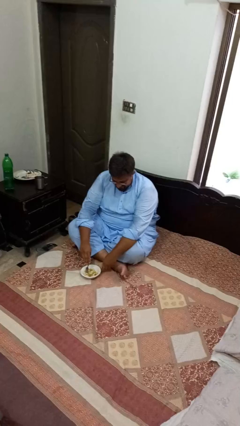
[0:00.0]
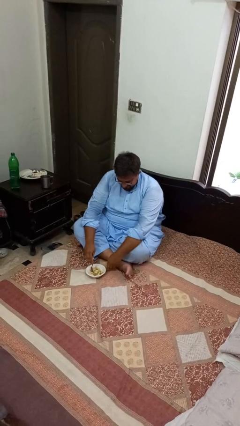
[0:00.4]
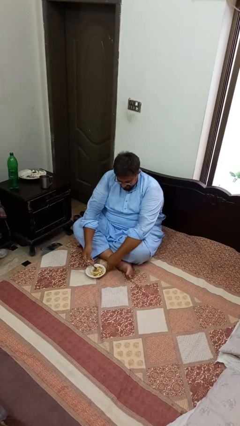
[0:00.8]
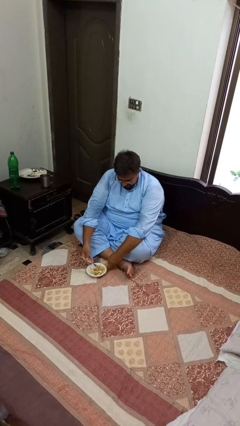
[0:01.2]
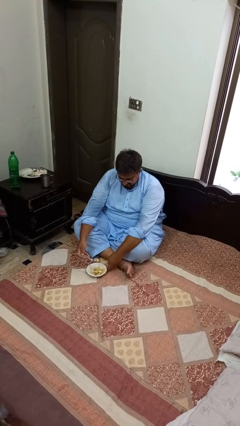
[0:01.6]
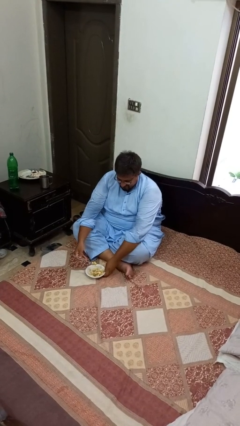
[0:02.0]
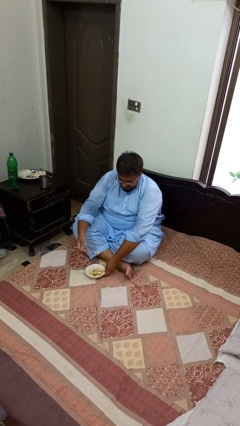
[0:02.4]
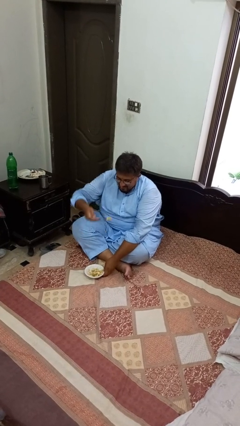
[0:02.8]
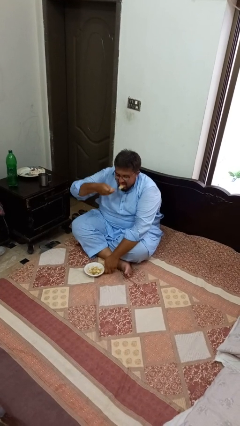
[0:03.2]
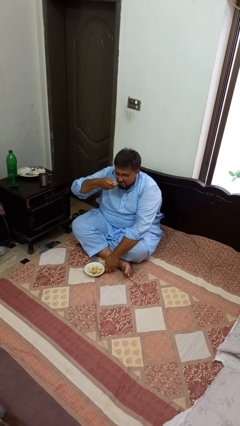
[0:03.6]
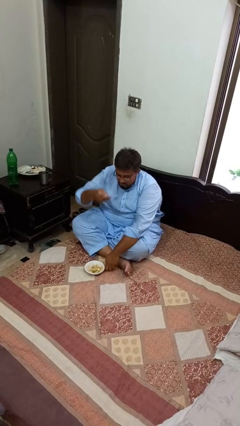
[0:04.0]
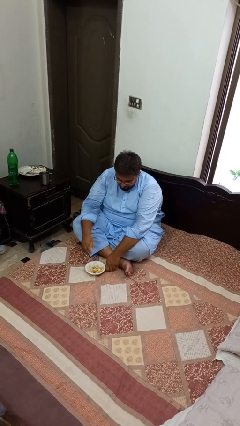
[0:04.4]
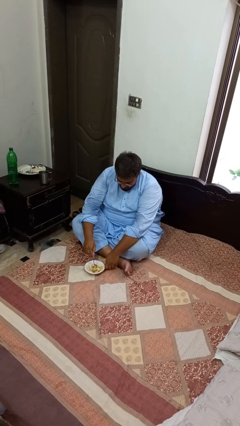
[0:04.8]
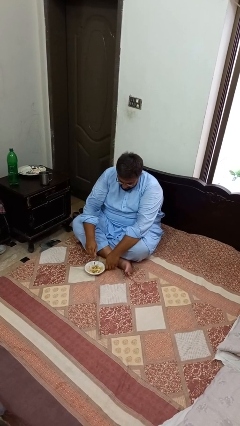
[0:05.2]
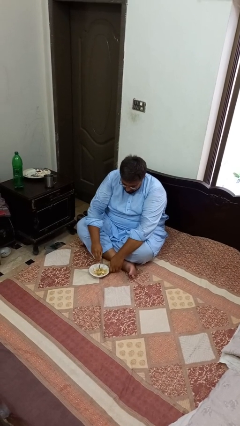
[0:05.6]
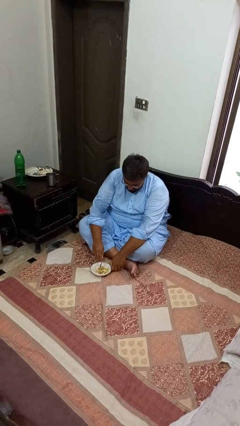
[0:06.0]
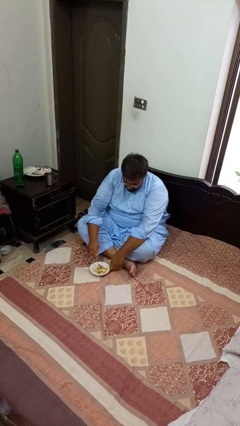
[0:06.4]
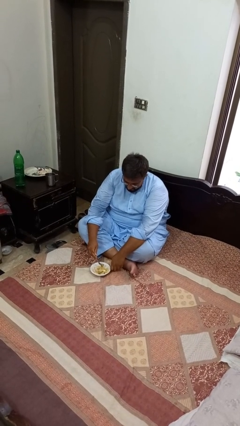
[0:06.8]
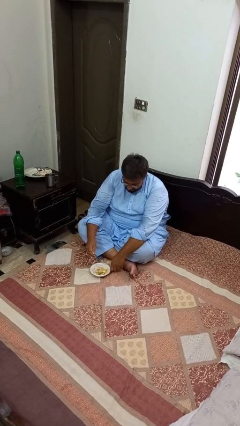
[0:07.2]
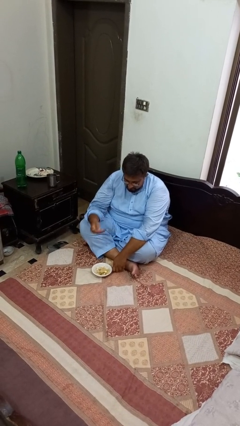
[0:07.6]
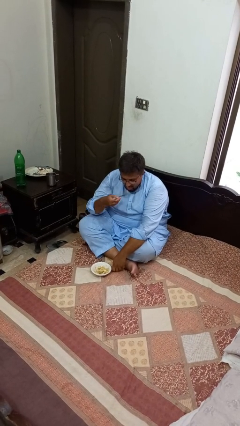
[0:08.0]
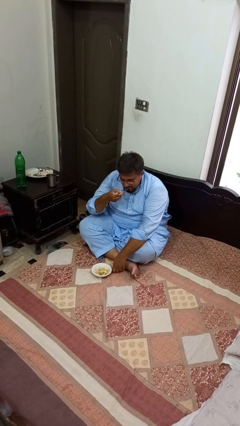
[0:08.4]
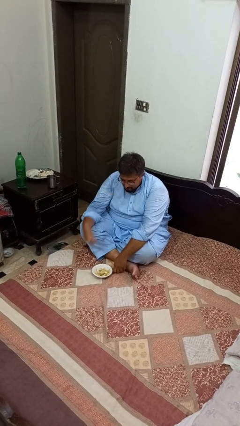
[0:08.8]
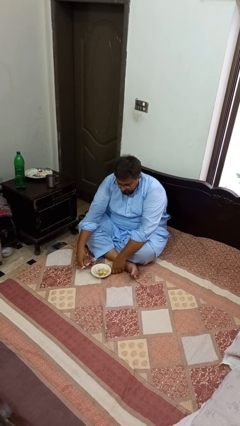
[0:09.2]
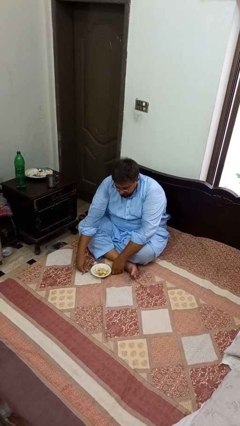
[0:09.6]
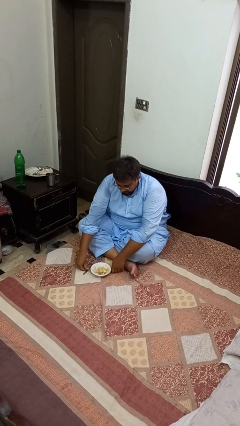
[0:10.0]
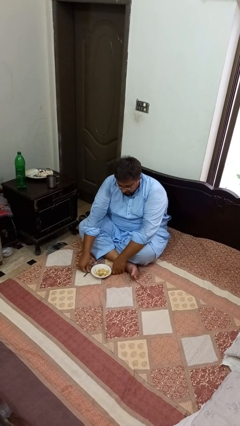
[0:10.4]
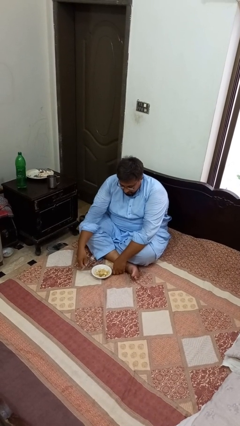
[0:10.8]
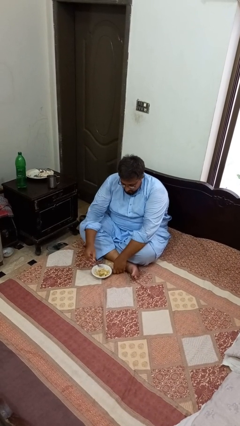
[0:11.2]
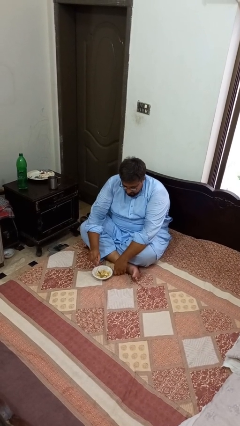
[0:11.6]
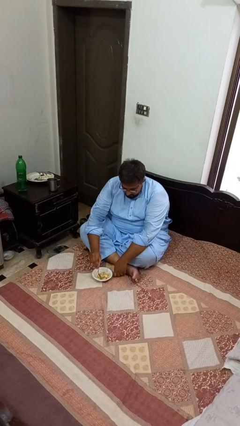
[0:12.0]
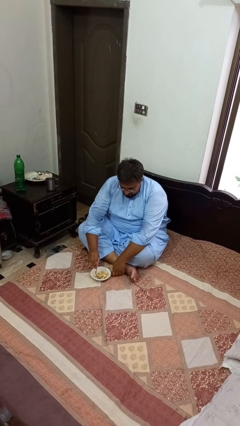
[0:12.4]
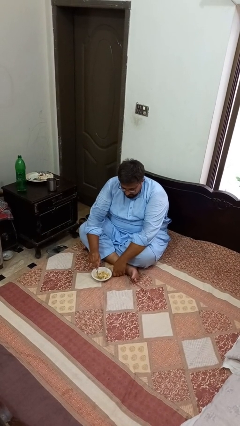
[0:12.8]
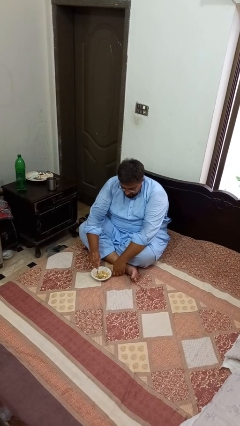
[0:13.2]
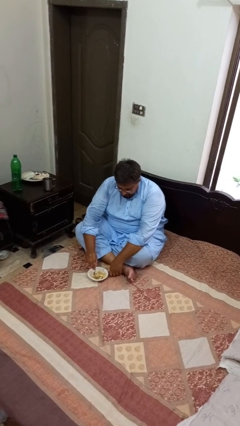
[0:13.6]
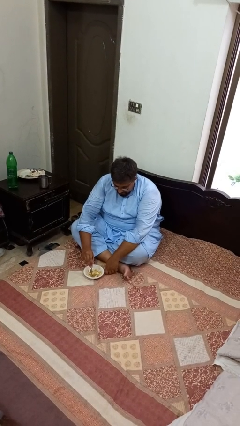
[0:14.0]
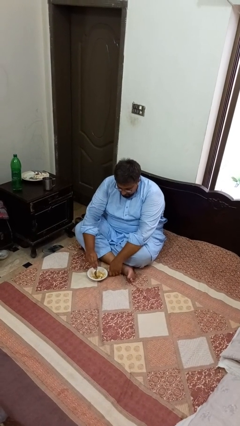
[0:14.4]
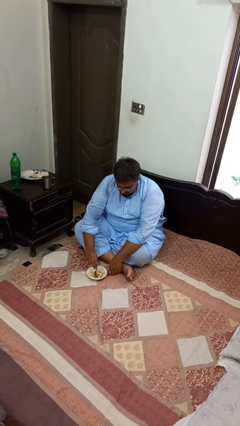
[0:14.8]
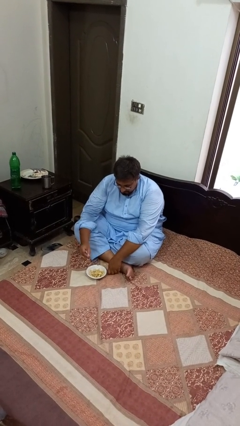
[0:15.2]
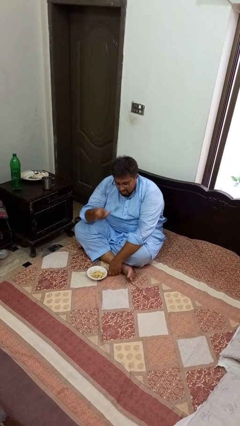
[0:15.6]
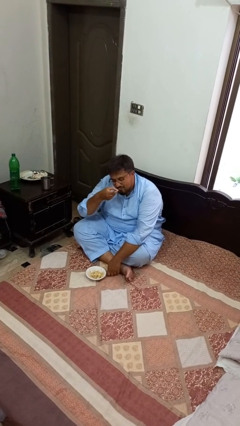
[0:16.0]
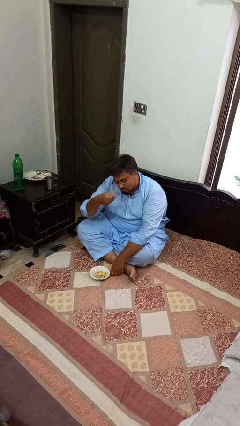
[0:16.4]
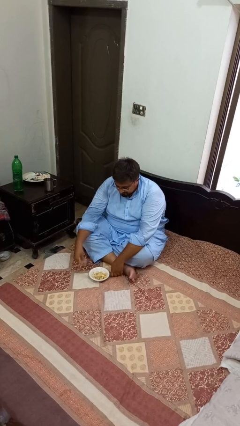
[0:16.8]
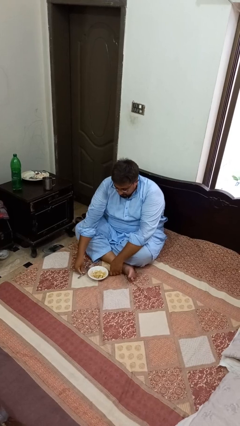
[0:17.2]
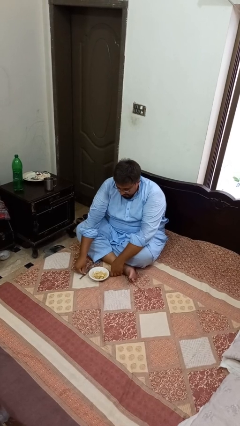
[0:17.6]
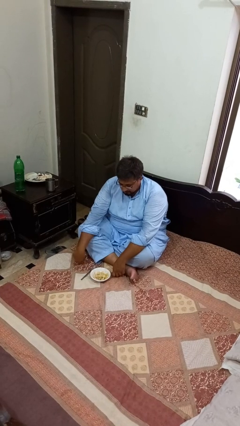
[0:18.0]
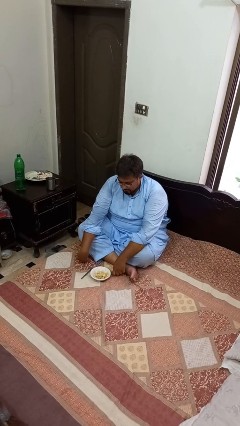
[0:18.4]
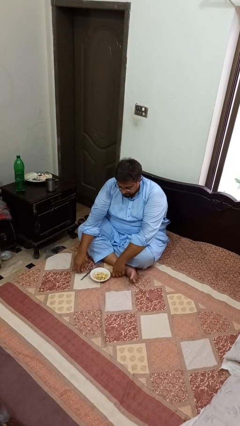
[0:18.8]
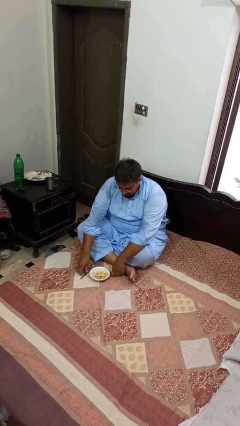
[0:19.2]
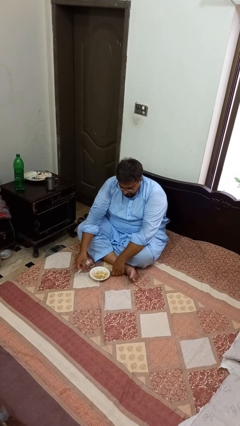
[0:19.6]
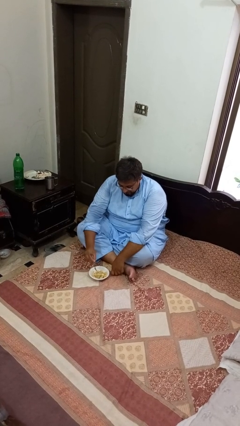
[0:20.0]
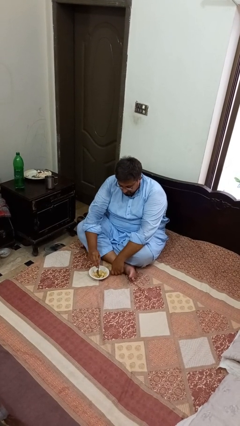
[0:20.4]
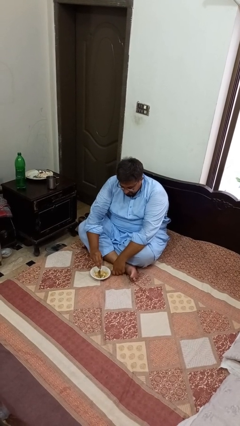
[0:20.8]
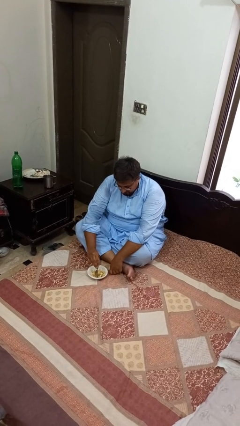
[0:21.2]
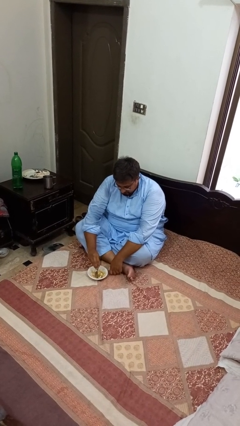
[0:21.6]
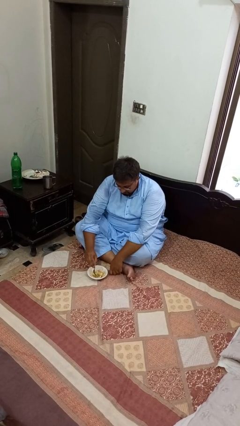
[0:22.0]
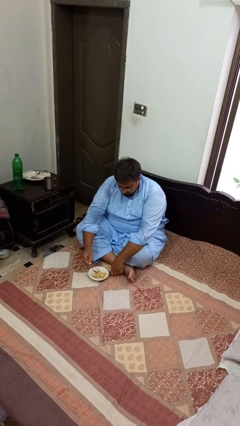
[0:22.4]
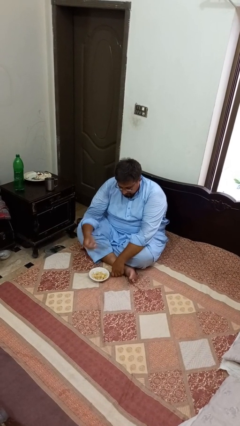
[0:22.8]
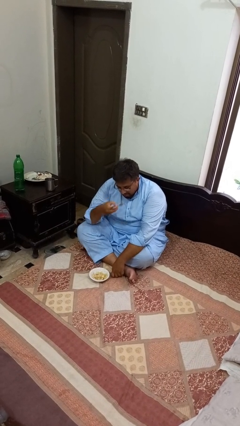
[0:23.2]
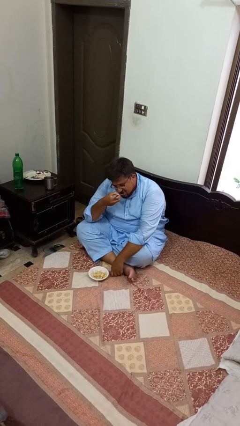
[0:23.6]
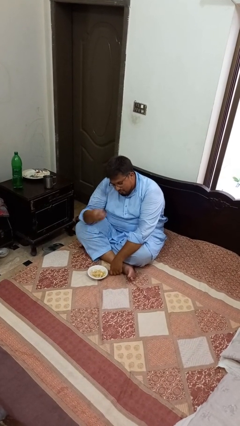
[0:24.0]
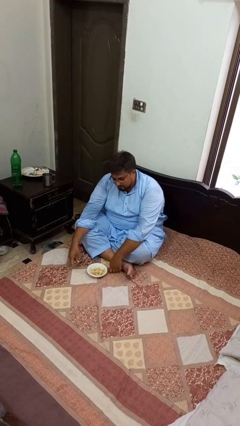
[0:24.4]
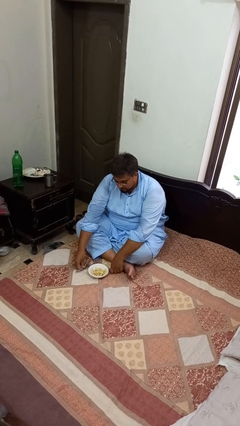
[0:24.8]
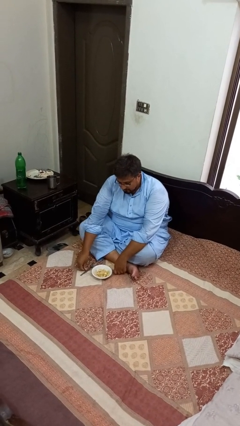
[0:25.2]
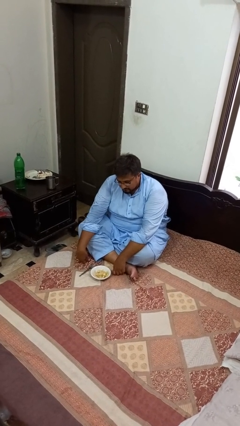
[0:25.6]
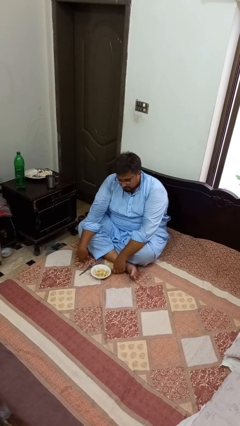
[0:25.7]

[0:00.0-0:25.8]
person eats with utensil

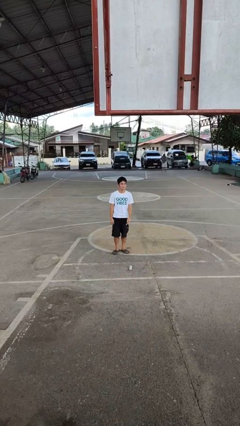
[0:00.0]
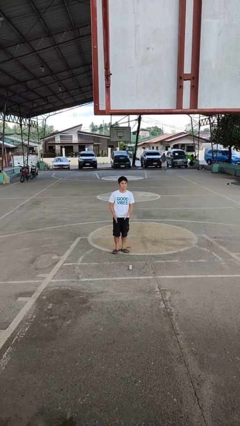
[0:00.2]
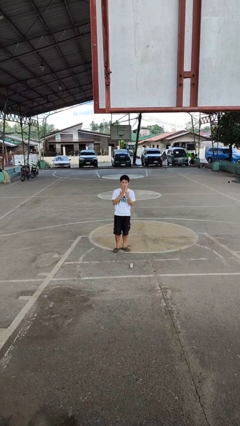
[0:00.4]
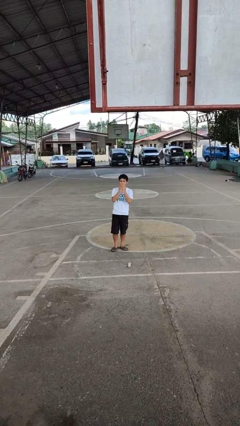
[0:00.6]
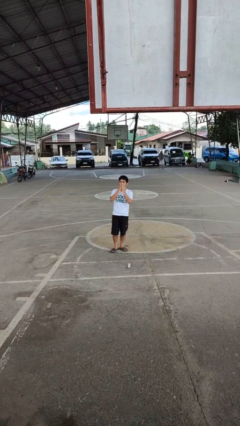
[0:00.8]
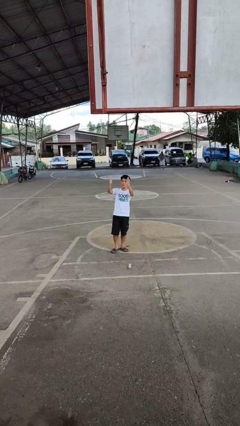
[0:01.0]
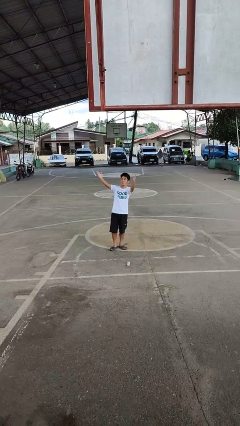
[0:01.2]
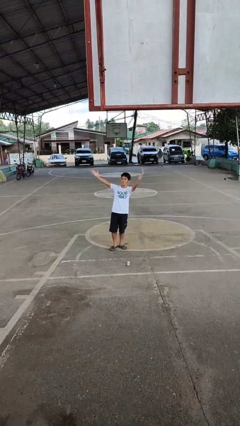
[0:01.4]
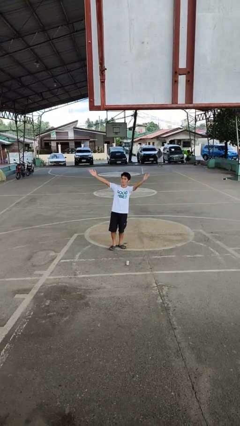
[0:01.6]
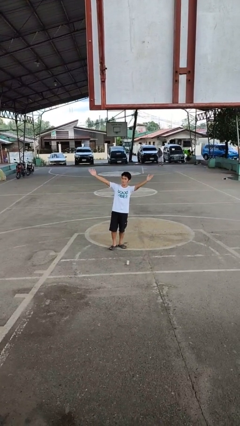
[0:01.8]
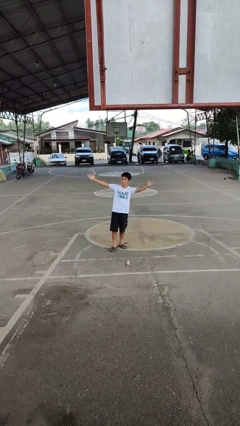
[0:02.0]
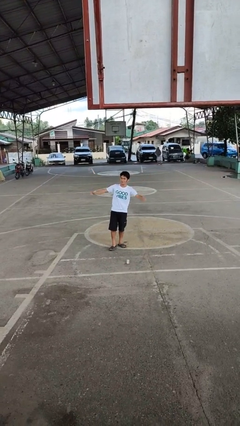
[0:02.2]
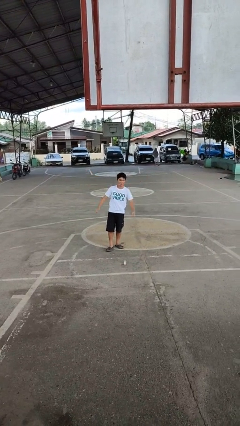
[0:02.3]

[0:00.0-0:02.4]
person gestures blow kiss

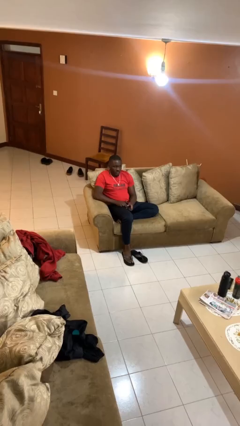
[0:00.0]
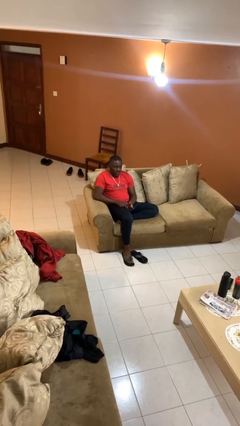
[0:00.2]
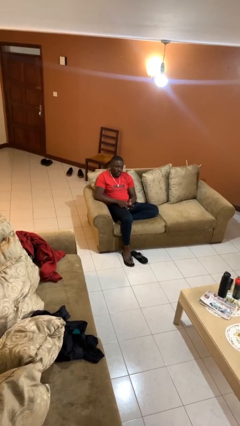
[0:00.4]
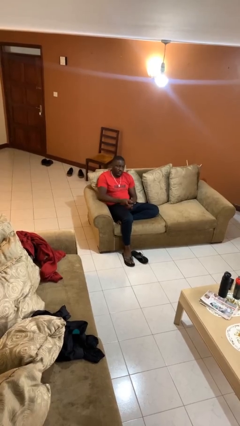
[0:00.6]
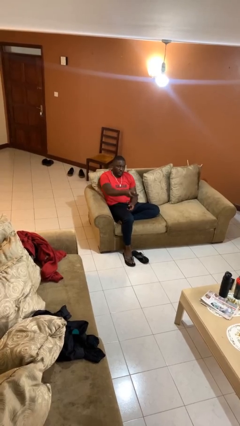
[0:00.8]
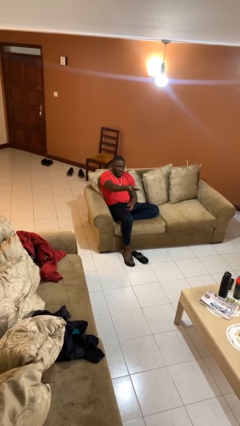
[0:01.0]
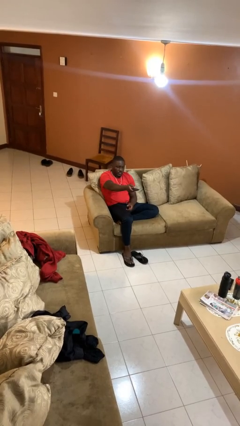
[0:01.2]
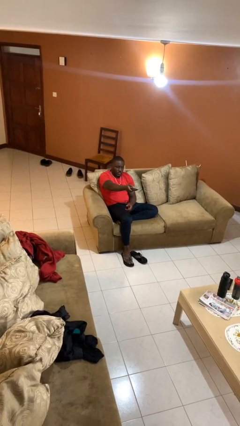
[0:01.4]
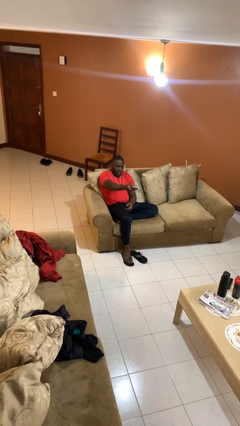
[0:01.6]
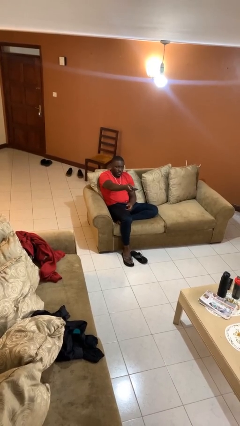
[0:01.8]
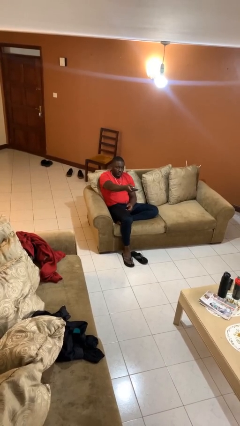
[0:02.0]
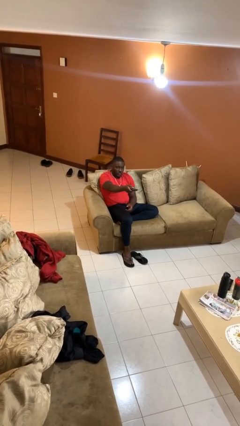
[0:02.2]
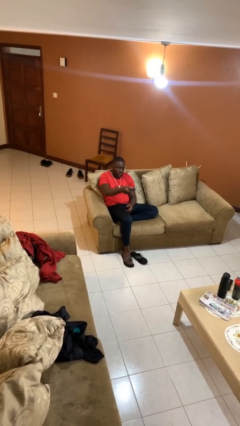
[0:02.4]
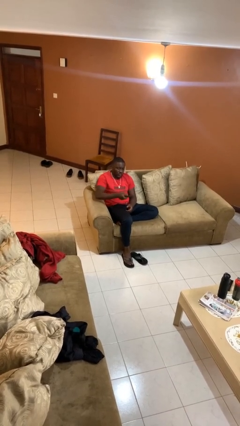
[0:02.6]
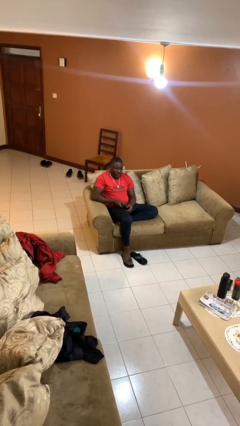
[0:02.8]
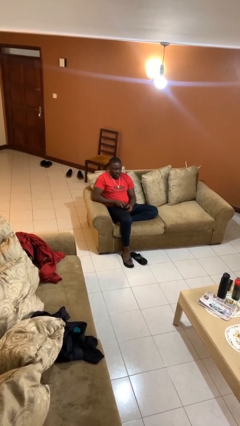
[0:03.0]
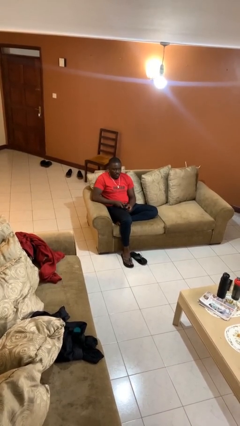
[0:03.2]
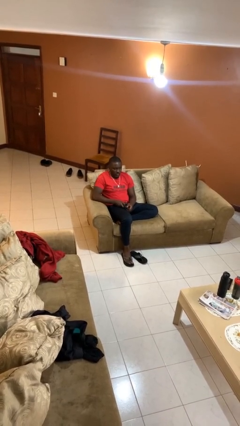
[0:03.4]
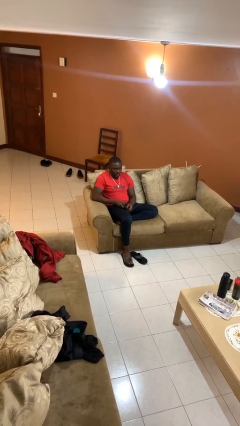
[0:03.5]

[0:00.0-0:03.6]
person uses television remote
